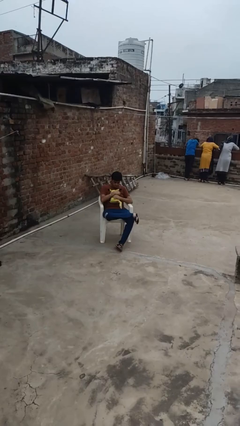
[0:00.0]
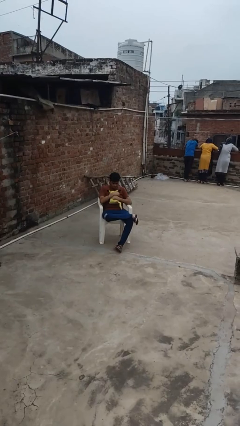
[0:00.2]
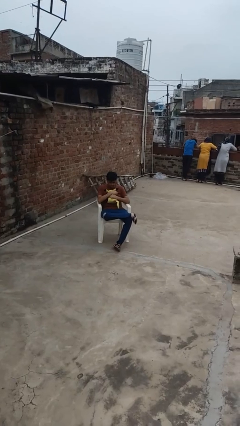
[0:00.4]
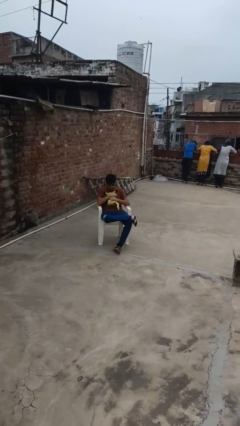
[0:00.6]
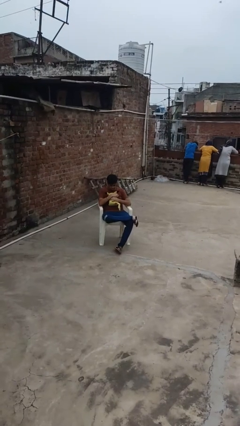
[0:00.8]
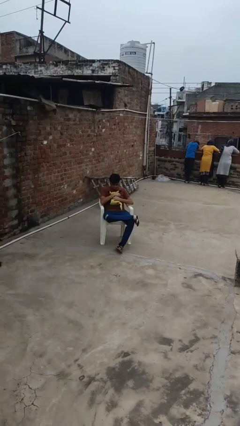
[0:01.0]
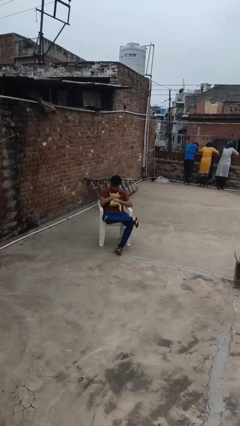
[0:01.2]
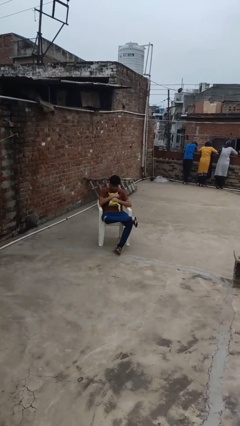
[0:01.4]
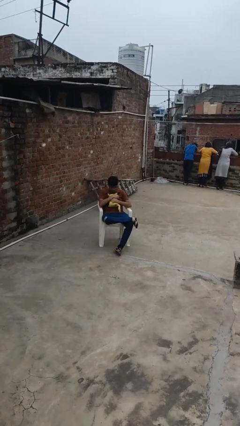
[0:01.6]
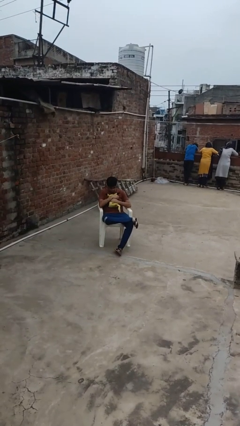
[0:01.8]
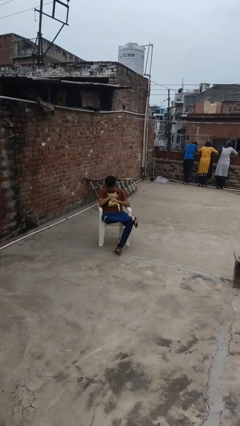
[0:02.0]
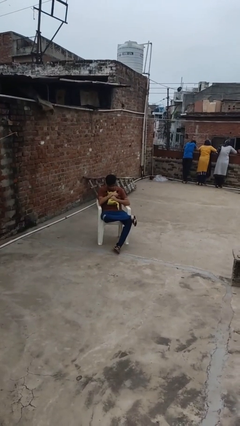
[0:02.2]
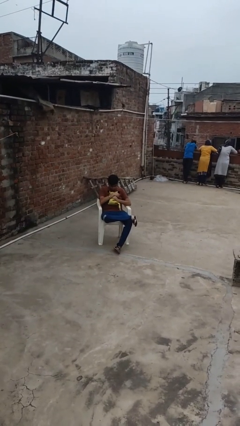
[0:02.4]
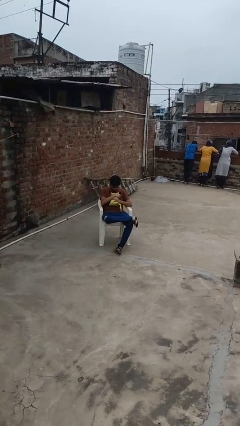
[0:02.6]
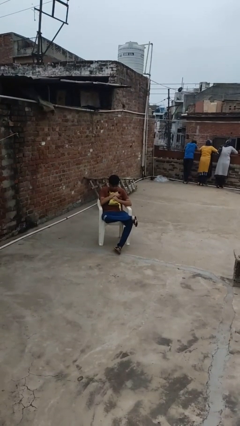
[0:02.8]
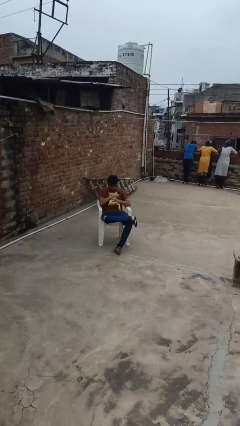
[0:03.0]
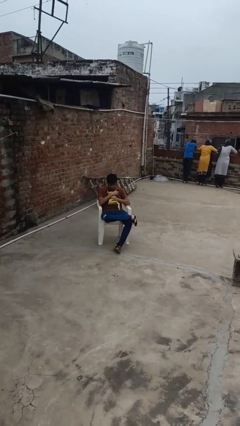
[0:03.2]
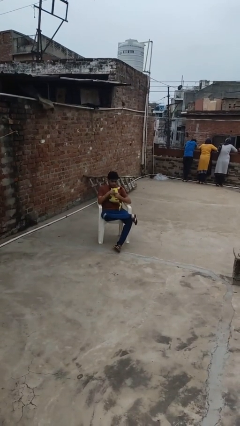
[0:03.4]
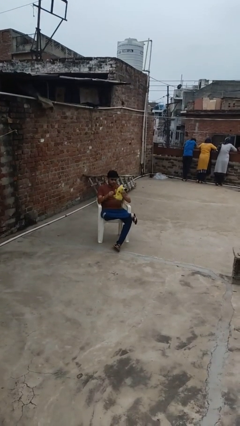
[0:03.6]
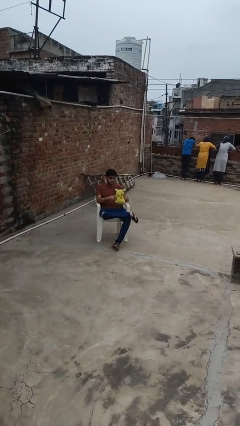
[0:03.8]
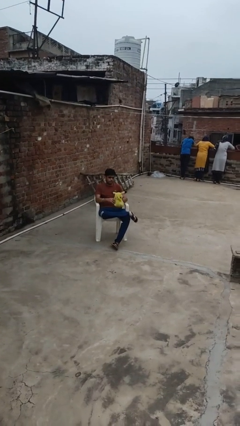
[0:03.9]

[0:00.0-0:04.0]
person hugs stuffed animal

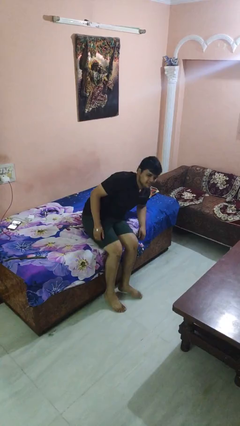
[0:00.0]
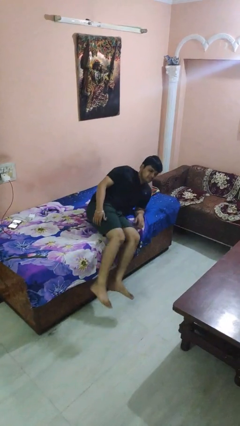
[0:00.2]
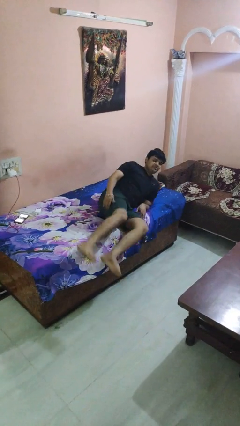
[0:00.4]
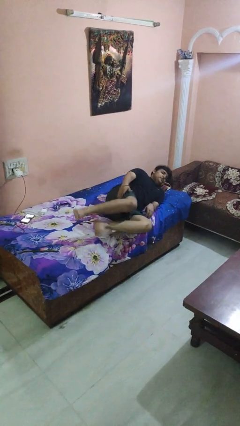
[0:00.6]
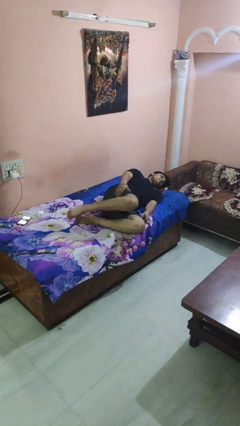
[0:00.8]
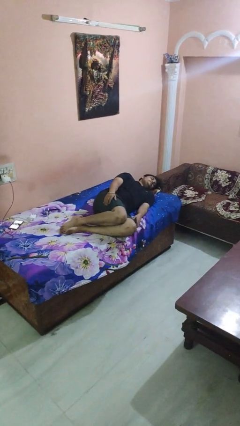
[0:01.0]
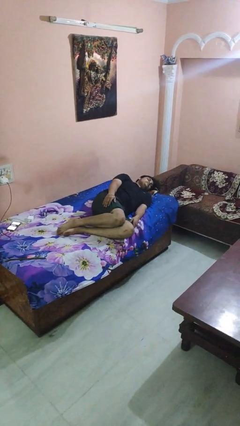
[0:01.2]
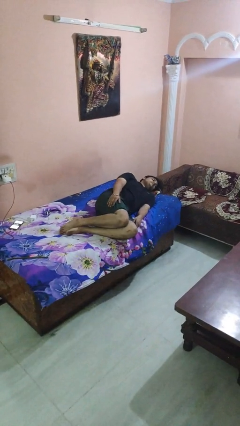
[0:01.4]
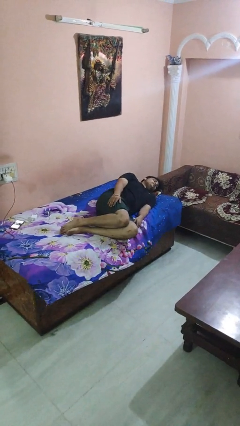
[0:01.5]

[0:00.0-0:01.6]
person lies down on bed

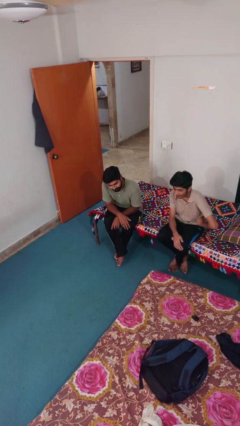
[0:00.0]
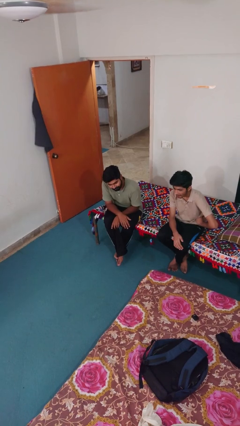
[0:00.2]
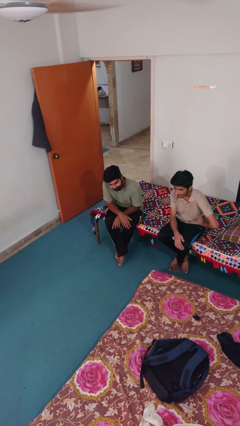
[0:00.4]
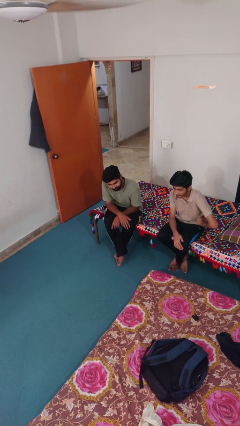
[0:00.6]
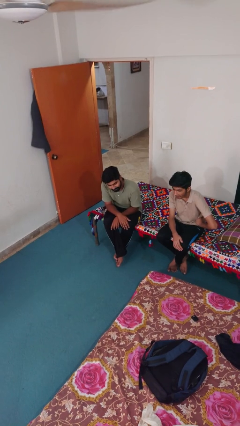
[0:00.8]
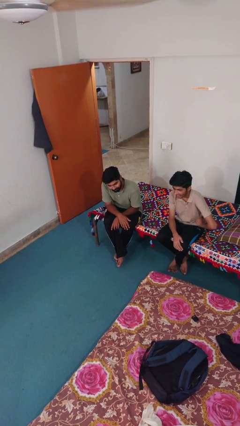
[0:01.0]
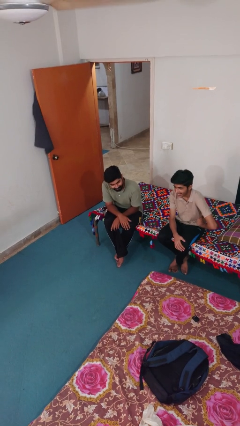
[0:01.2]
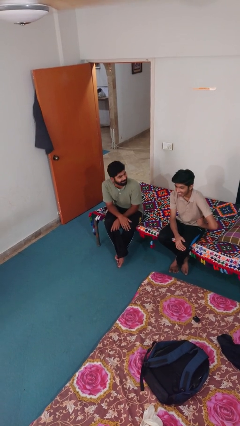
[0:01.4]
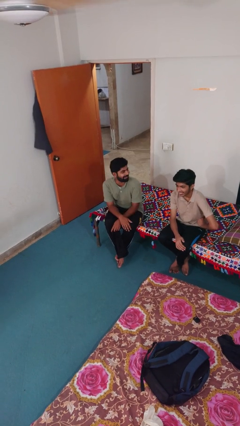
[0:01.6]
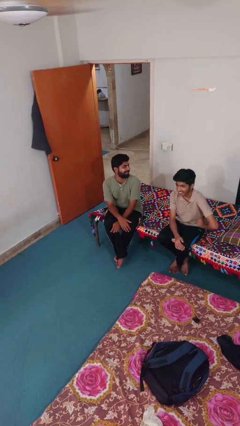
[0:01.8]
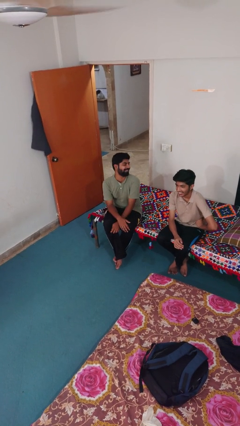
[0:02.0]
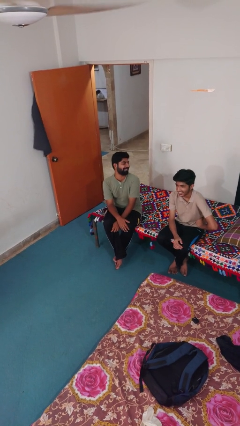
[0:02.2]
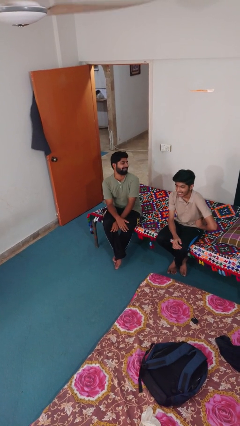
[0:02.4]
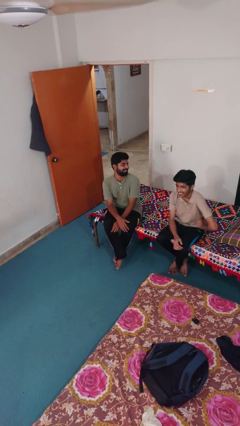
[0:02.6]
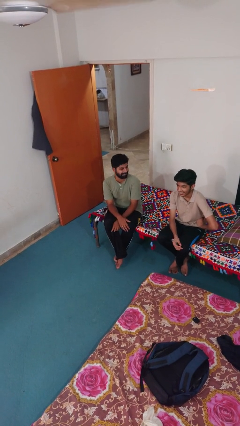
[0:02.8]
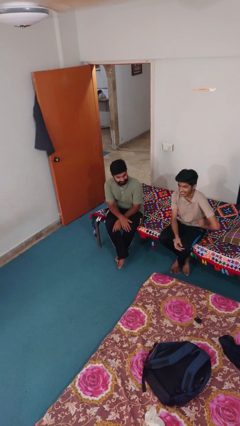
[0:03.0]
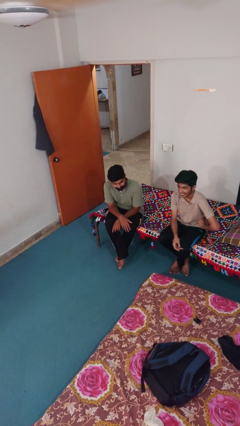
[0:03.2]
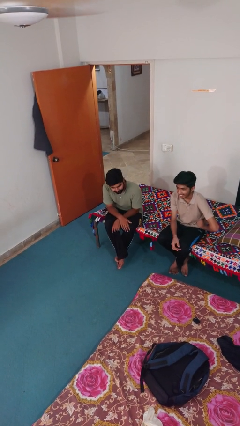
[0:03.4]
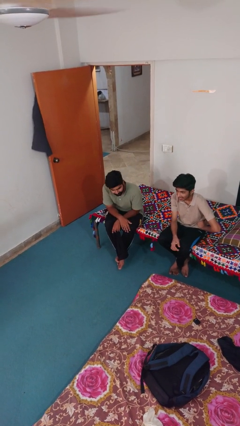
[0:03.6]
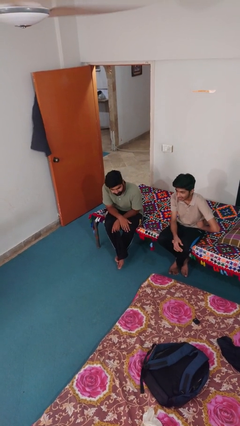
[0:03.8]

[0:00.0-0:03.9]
person laughs with person

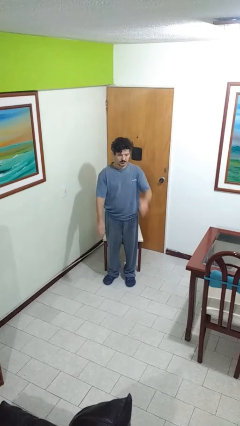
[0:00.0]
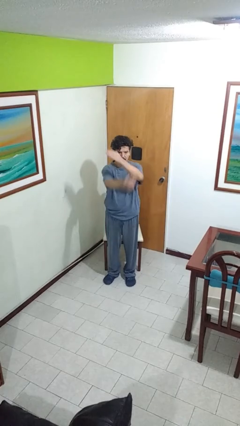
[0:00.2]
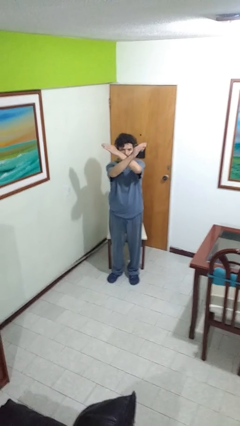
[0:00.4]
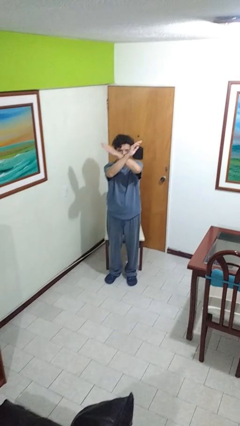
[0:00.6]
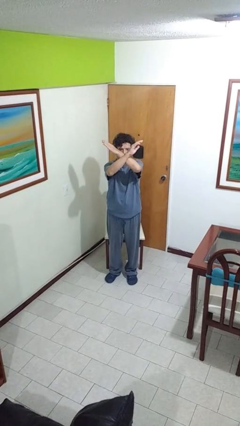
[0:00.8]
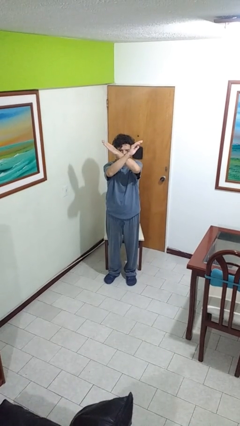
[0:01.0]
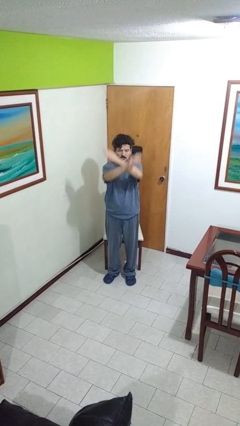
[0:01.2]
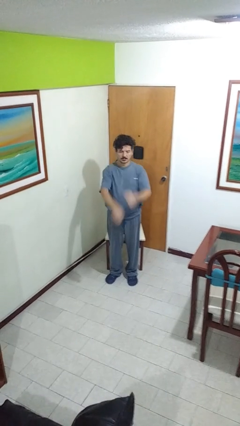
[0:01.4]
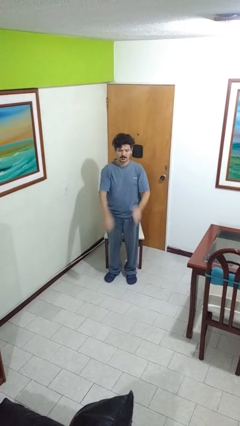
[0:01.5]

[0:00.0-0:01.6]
person gestures arms x

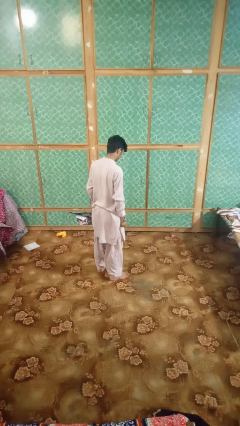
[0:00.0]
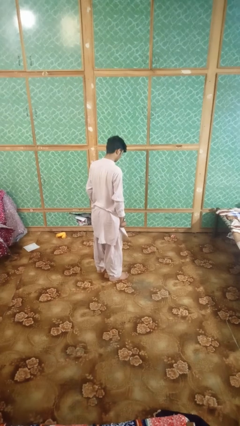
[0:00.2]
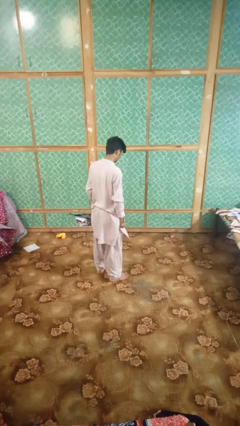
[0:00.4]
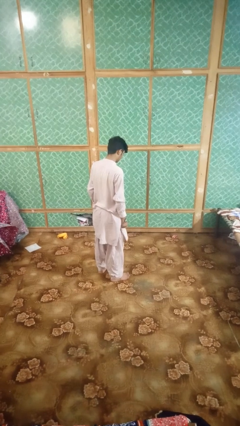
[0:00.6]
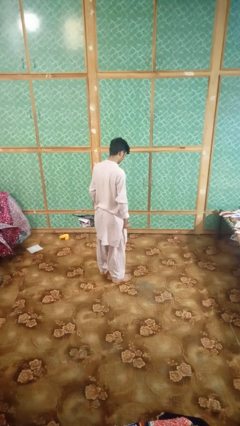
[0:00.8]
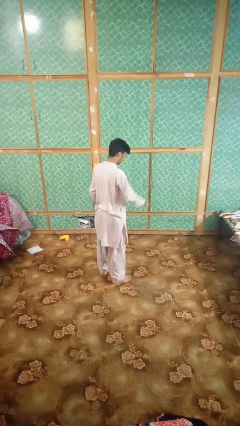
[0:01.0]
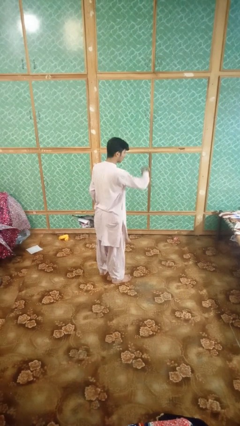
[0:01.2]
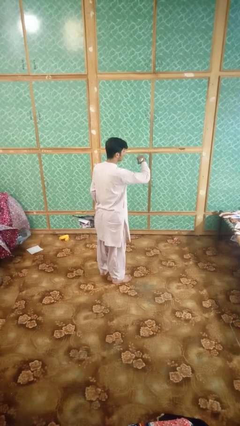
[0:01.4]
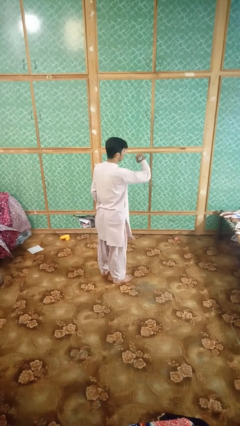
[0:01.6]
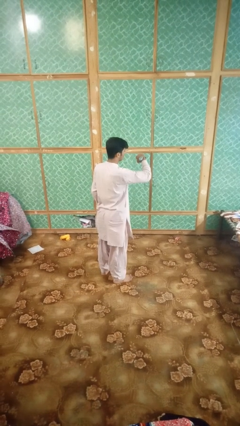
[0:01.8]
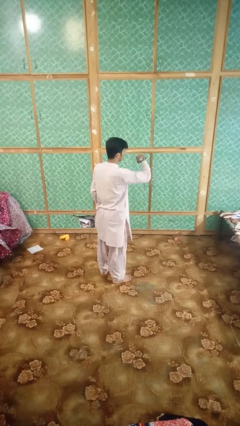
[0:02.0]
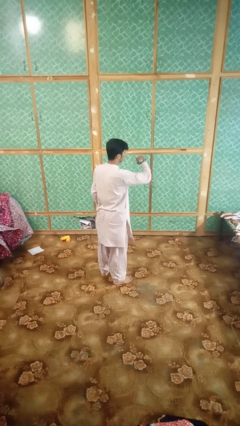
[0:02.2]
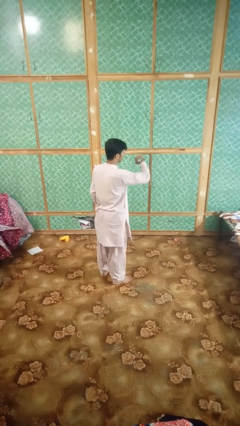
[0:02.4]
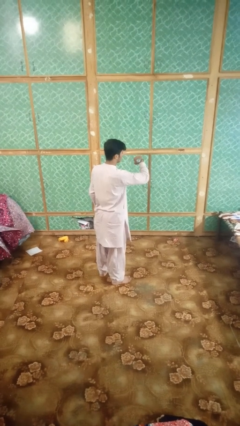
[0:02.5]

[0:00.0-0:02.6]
person looks at wristwatch

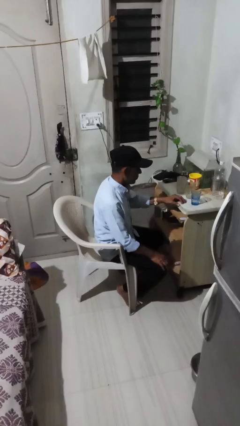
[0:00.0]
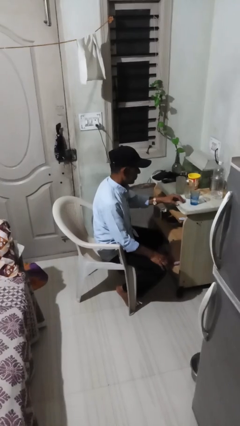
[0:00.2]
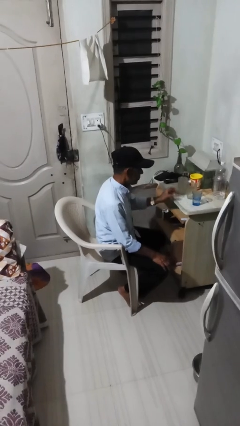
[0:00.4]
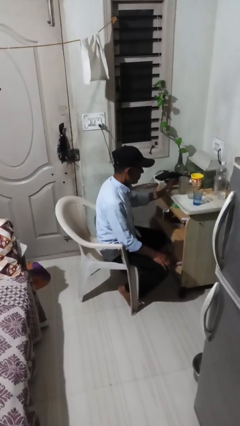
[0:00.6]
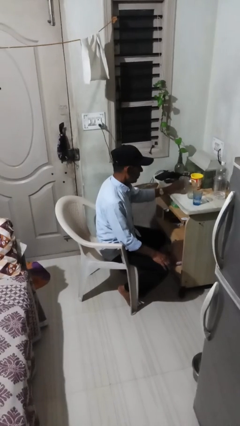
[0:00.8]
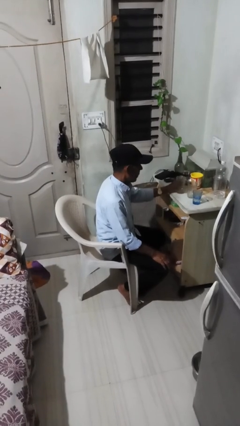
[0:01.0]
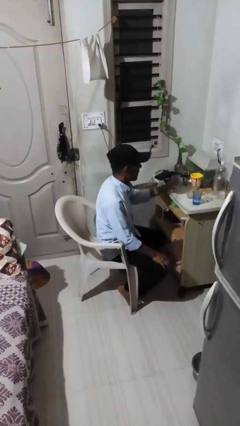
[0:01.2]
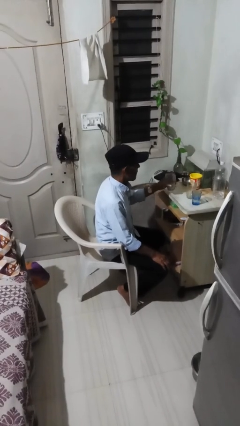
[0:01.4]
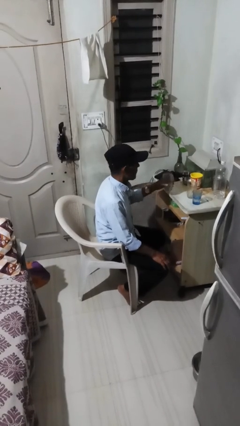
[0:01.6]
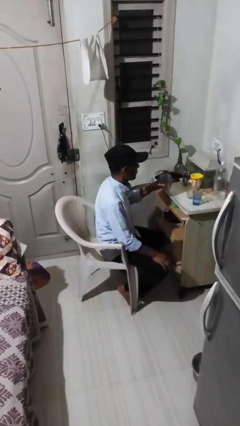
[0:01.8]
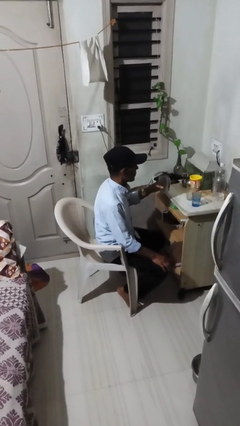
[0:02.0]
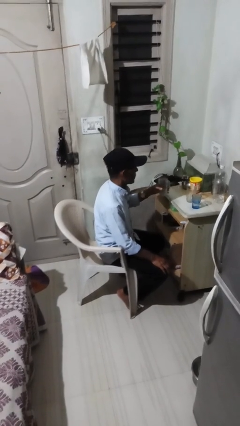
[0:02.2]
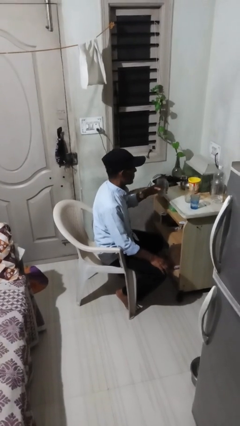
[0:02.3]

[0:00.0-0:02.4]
person picks up object from table

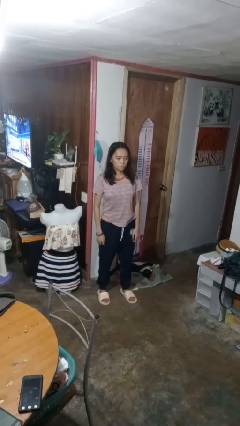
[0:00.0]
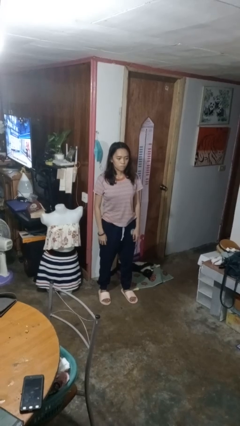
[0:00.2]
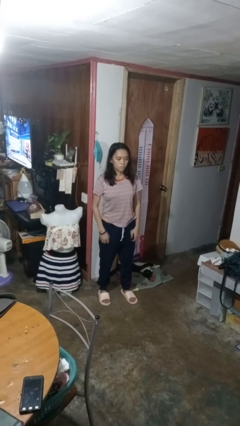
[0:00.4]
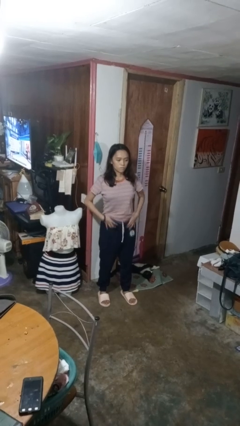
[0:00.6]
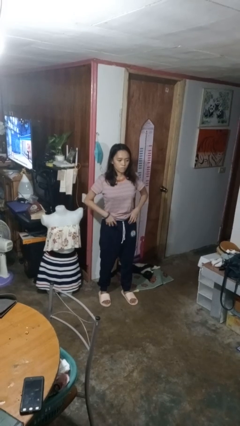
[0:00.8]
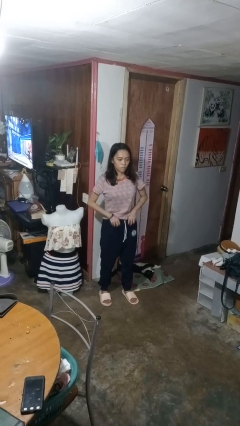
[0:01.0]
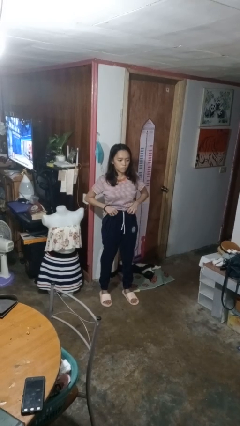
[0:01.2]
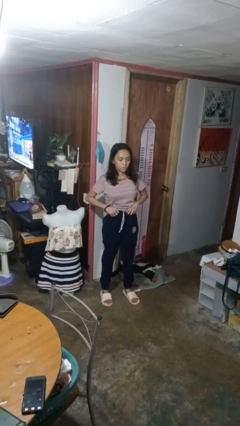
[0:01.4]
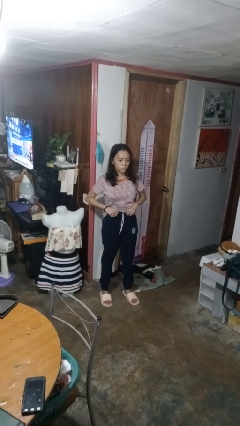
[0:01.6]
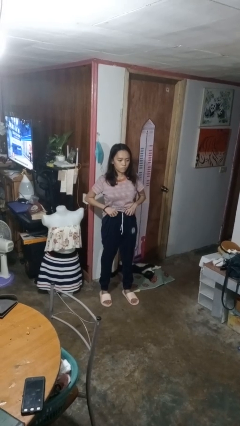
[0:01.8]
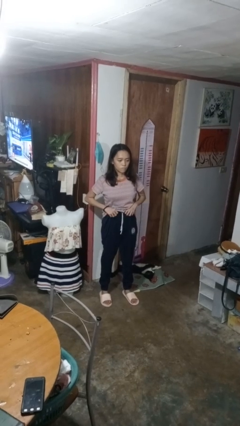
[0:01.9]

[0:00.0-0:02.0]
person hikes up pants
